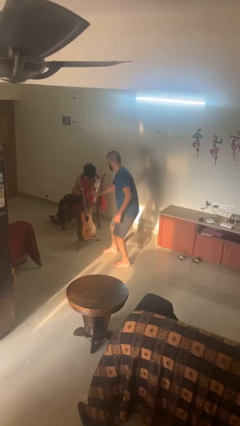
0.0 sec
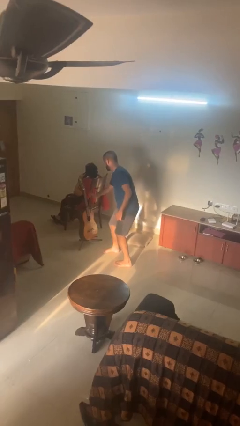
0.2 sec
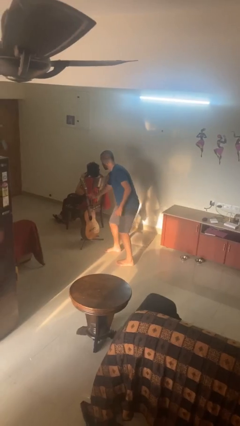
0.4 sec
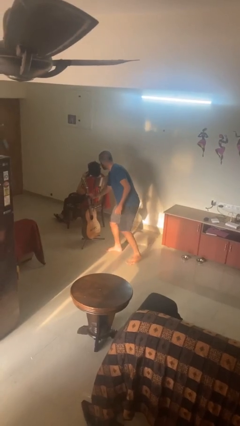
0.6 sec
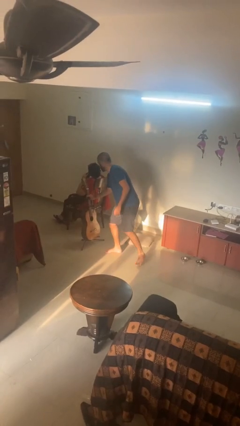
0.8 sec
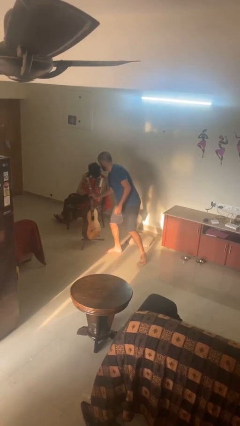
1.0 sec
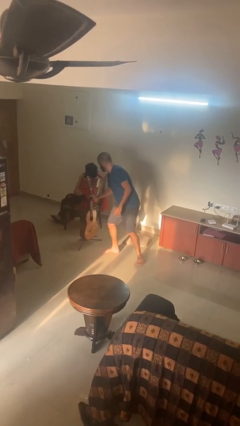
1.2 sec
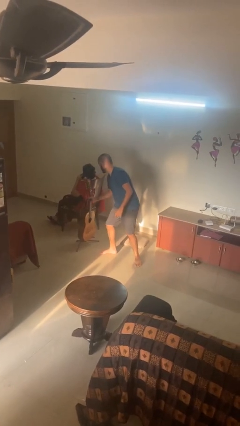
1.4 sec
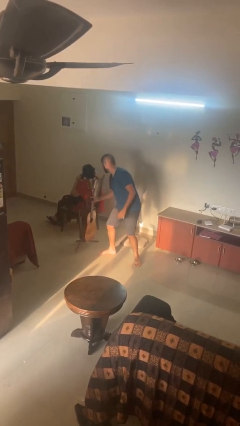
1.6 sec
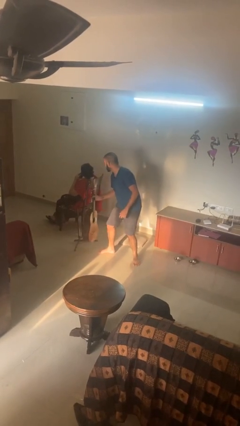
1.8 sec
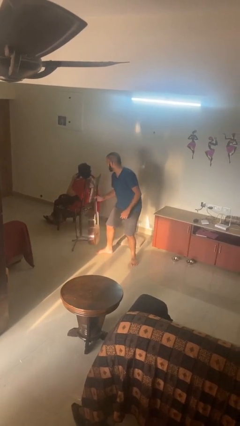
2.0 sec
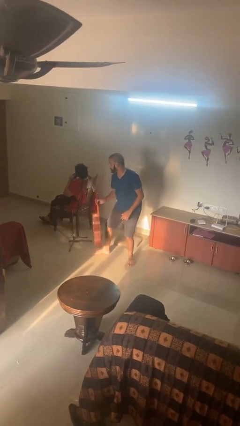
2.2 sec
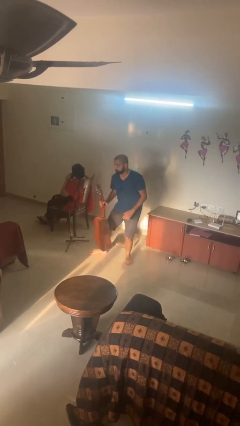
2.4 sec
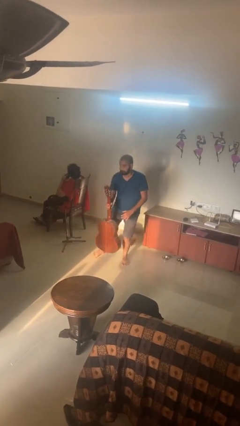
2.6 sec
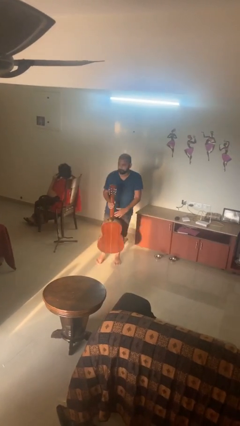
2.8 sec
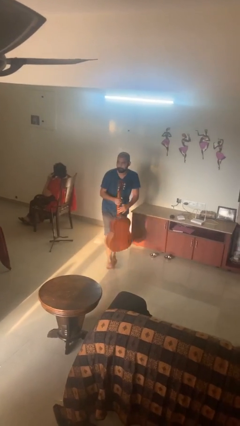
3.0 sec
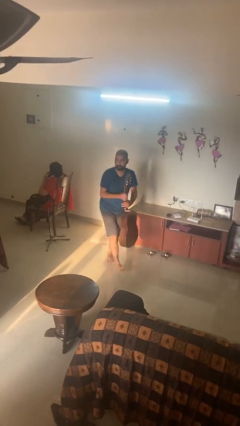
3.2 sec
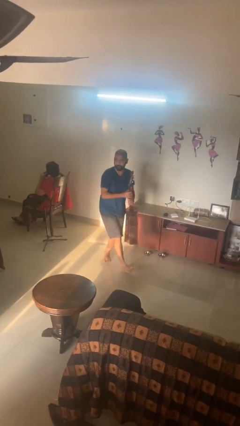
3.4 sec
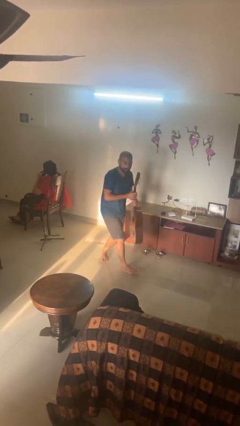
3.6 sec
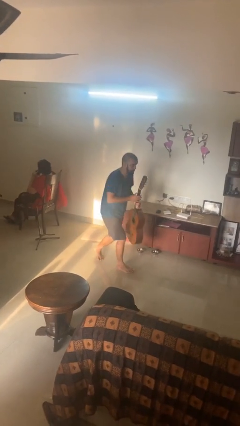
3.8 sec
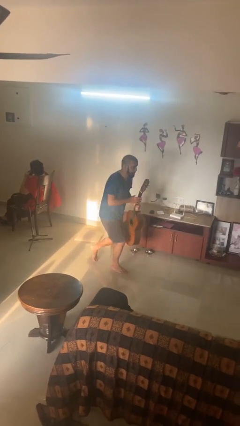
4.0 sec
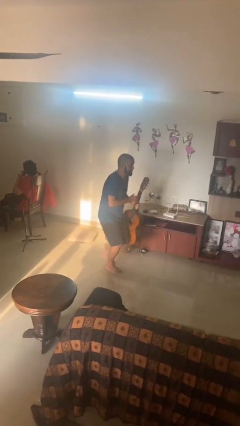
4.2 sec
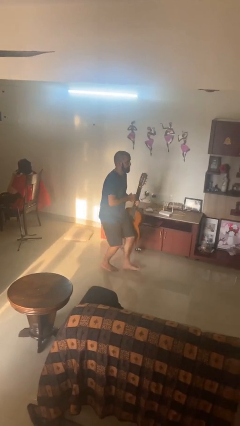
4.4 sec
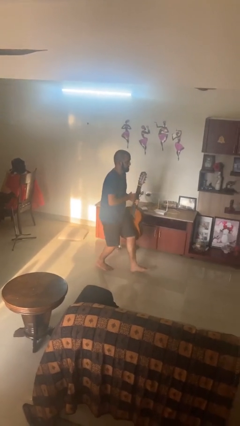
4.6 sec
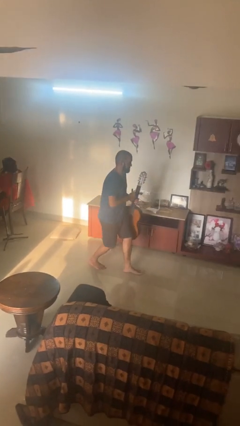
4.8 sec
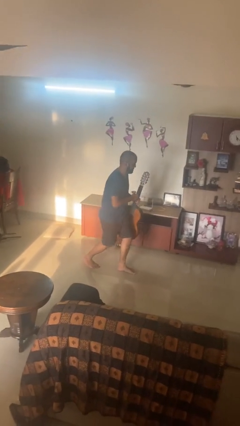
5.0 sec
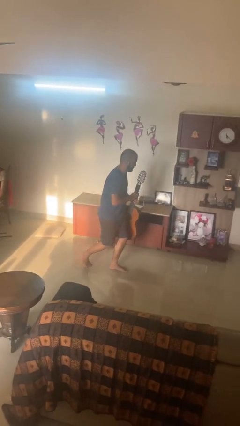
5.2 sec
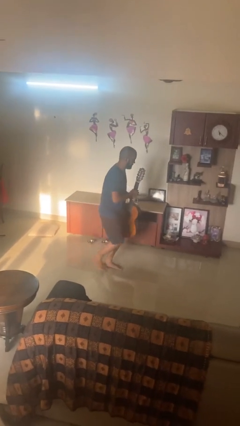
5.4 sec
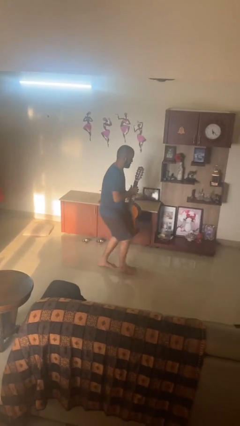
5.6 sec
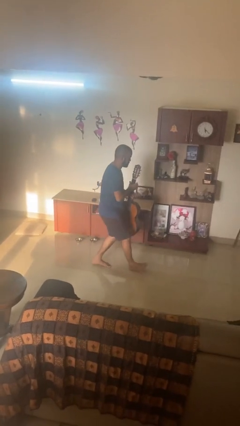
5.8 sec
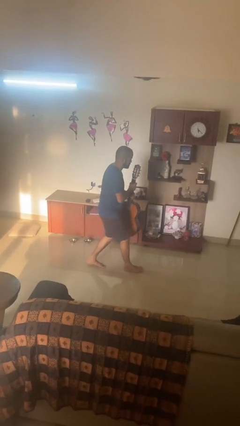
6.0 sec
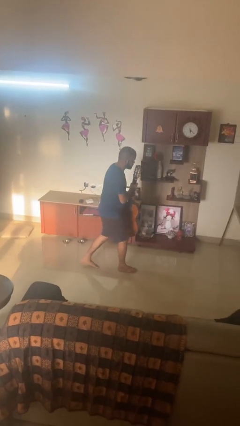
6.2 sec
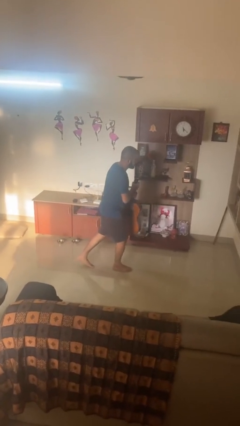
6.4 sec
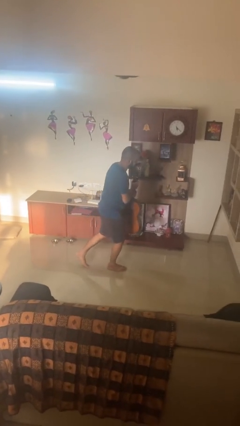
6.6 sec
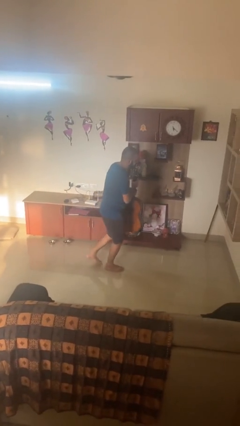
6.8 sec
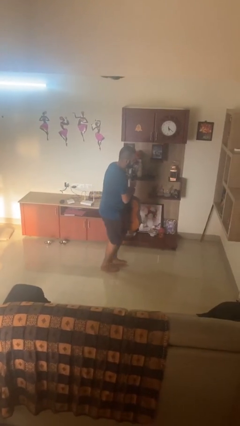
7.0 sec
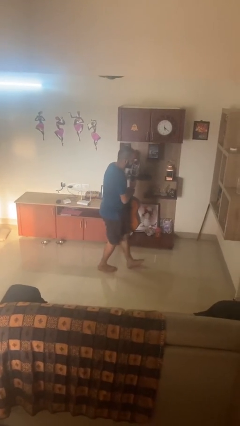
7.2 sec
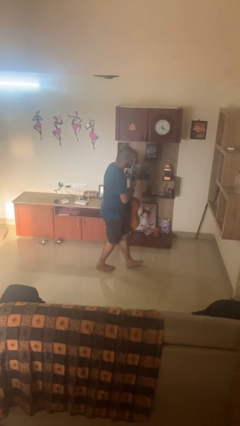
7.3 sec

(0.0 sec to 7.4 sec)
person steals object from person

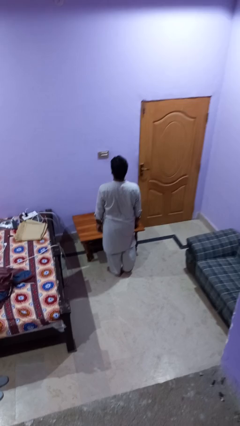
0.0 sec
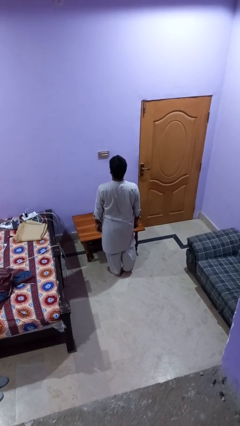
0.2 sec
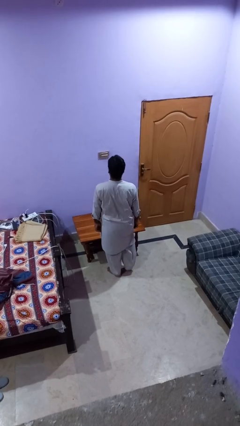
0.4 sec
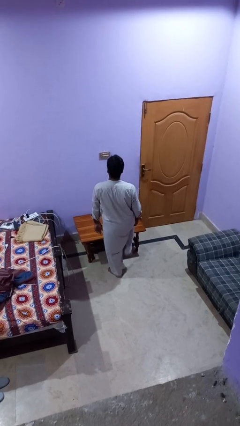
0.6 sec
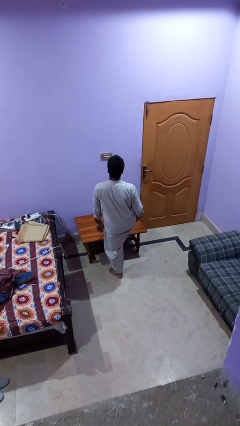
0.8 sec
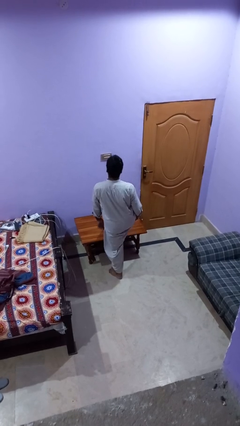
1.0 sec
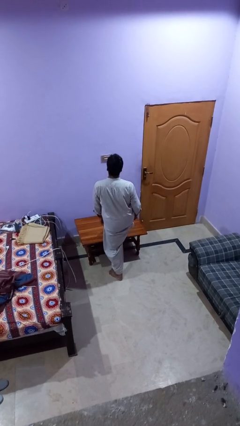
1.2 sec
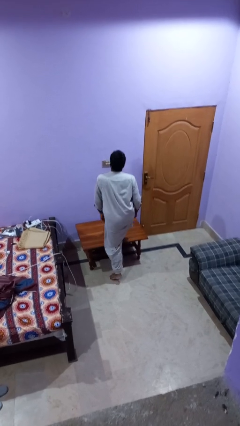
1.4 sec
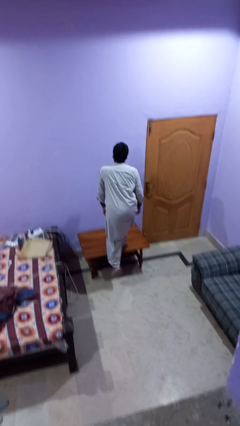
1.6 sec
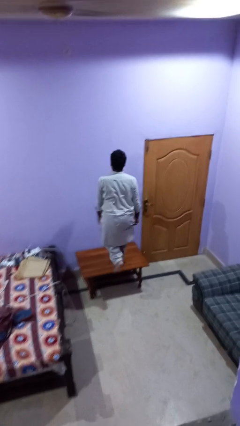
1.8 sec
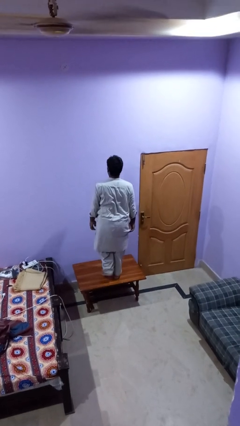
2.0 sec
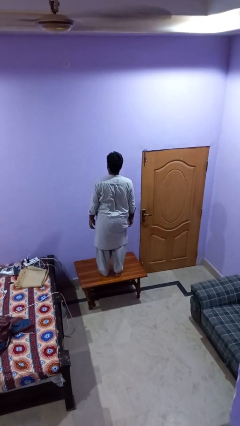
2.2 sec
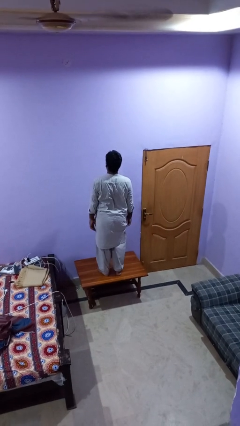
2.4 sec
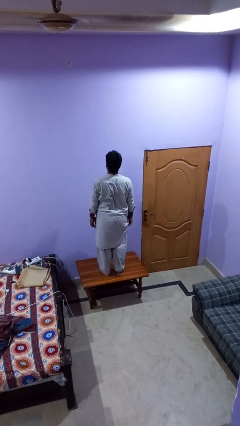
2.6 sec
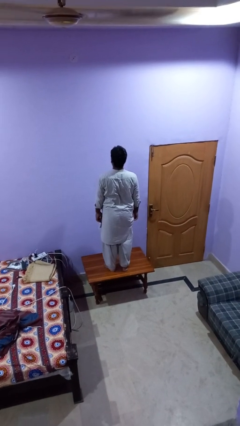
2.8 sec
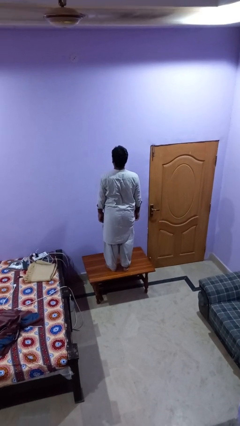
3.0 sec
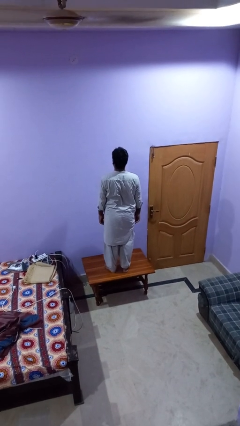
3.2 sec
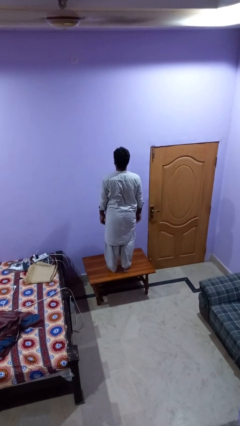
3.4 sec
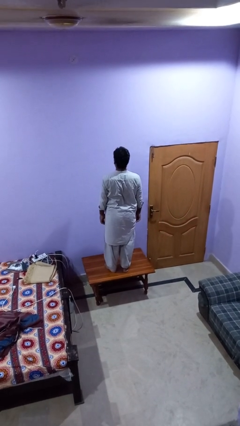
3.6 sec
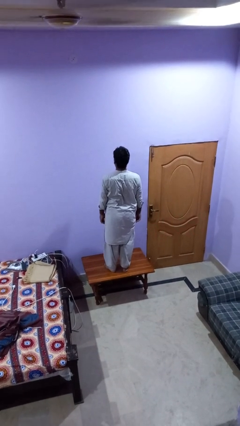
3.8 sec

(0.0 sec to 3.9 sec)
person climbs on table

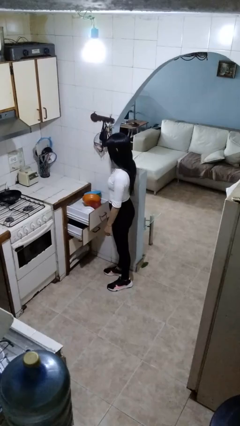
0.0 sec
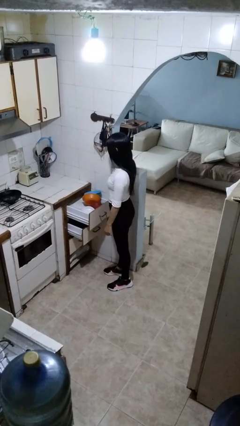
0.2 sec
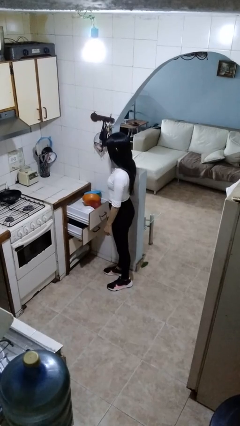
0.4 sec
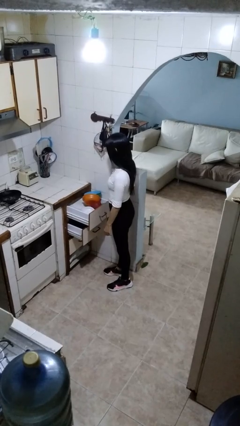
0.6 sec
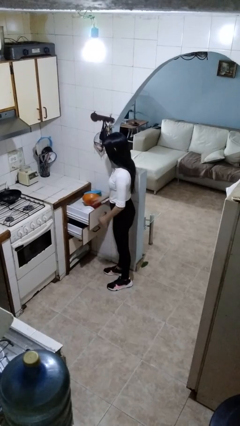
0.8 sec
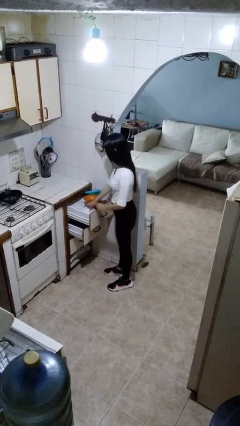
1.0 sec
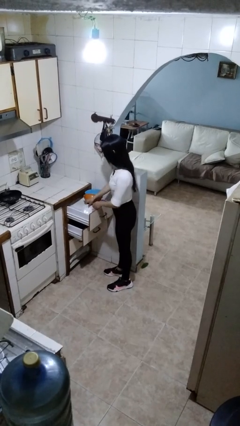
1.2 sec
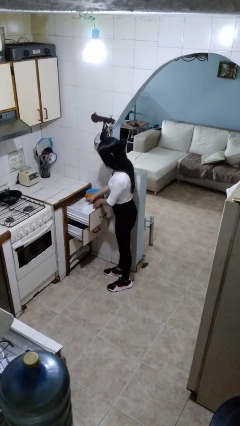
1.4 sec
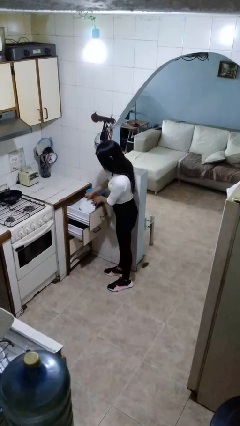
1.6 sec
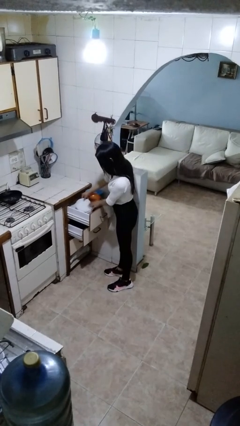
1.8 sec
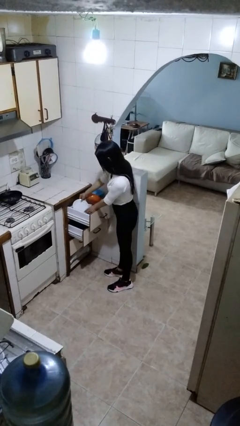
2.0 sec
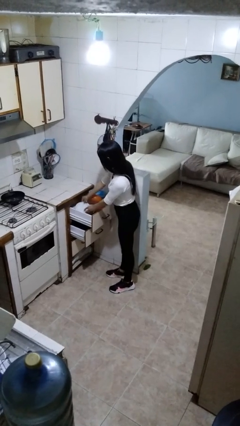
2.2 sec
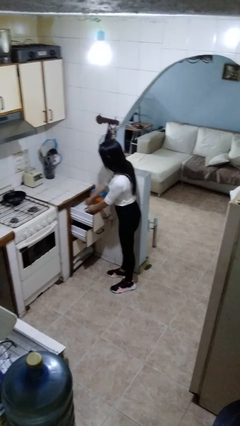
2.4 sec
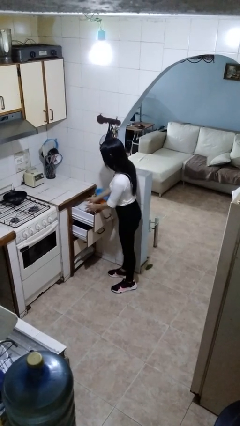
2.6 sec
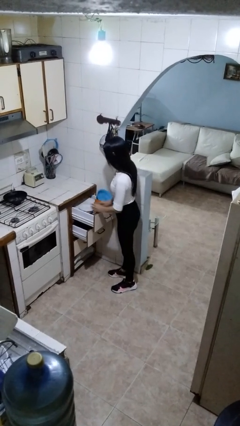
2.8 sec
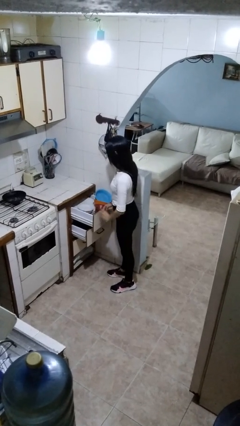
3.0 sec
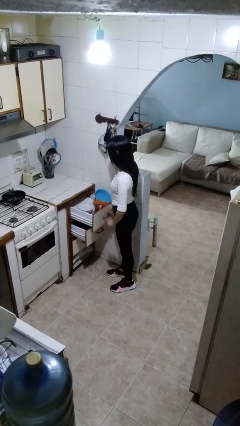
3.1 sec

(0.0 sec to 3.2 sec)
person searches in kitchen drawer

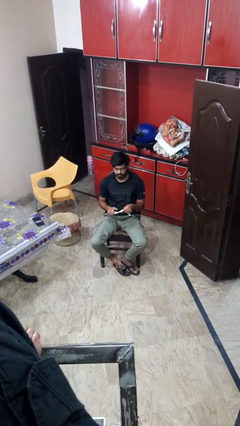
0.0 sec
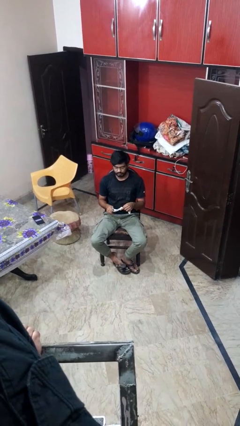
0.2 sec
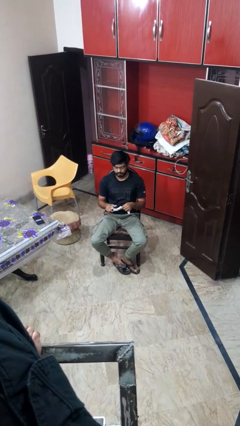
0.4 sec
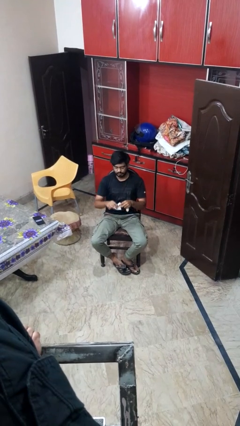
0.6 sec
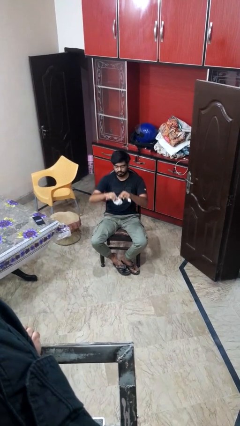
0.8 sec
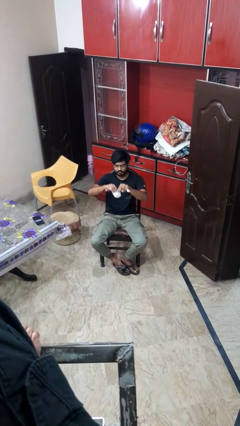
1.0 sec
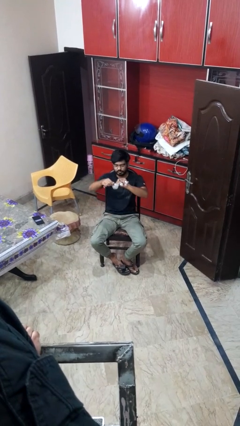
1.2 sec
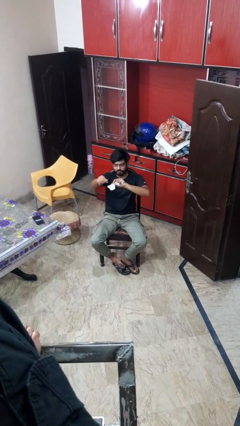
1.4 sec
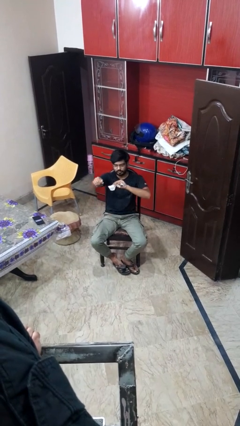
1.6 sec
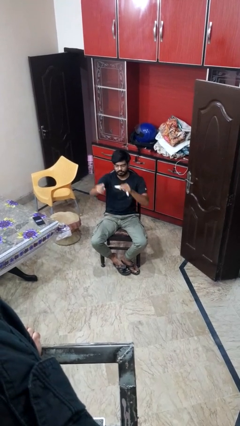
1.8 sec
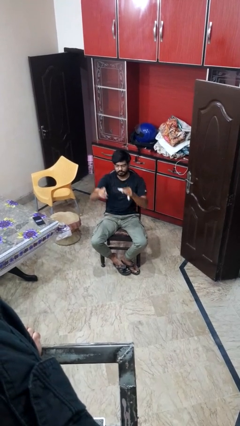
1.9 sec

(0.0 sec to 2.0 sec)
person tears paper

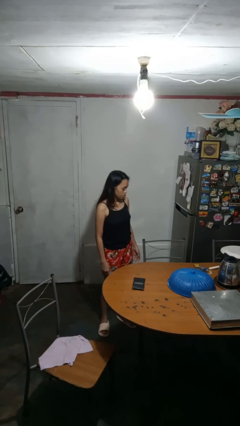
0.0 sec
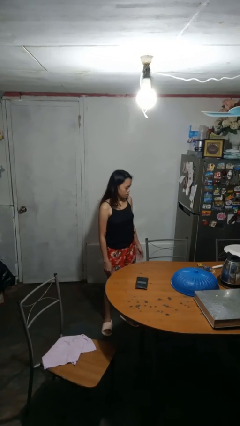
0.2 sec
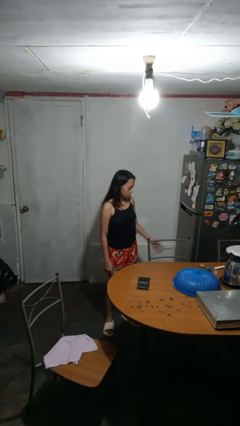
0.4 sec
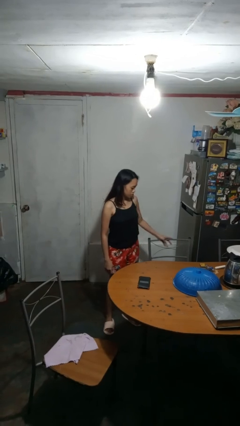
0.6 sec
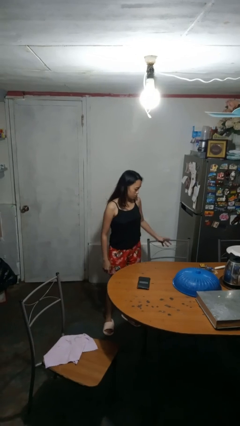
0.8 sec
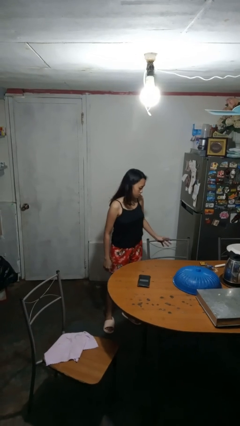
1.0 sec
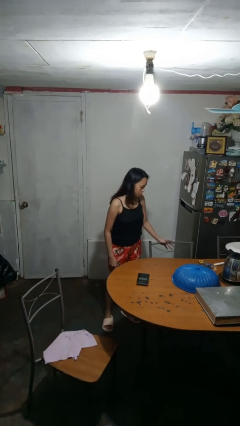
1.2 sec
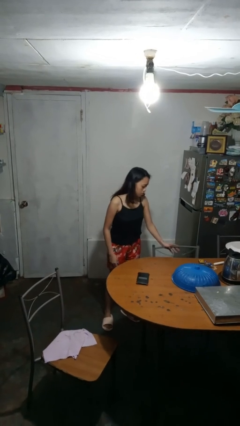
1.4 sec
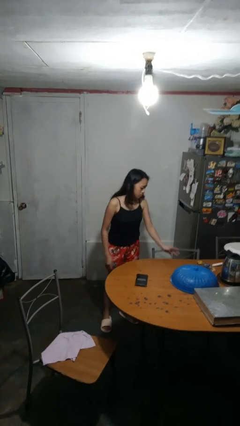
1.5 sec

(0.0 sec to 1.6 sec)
person pushes in chair
